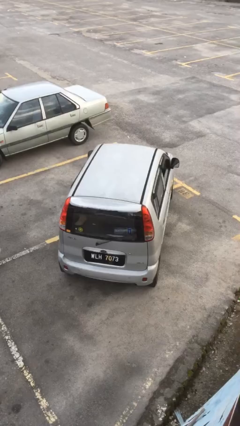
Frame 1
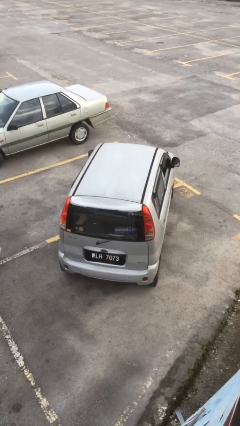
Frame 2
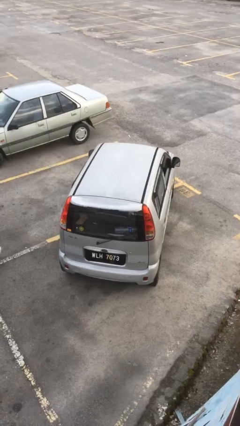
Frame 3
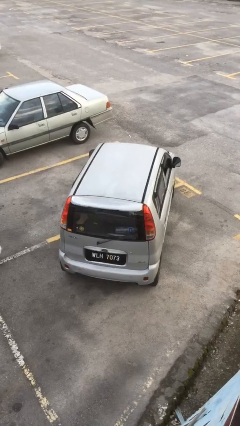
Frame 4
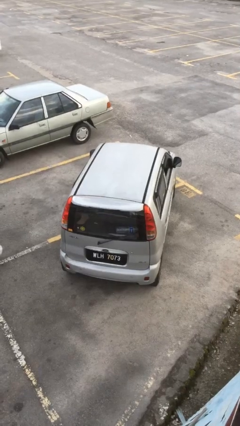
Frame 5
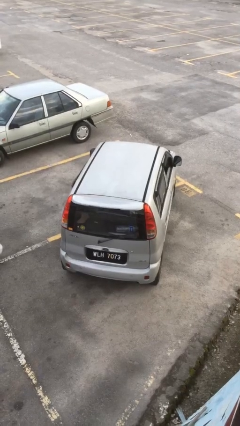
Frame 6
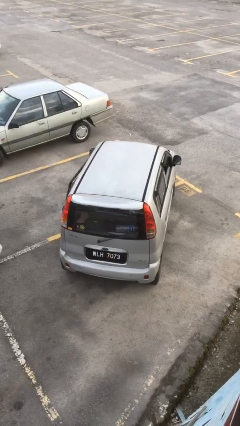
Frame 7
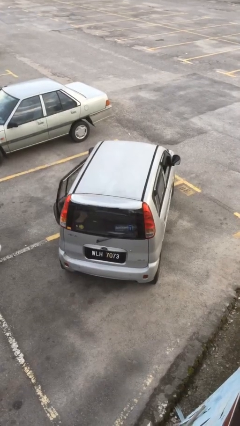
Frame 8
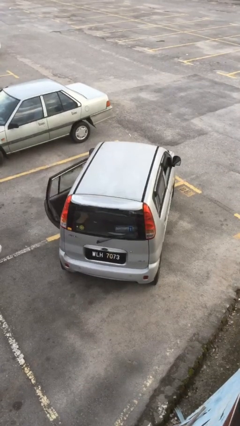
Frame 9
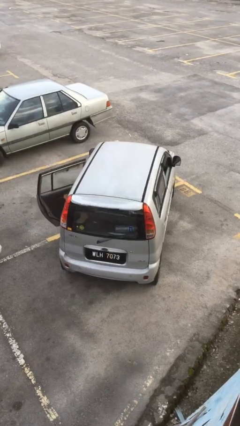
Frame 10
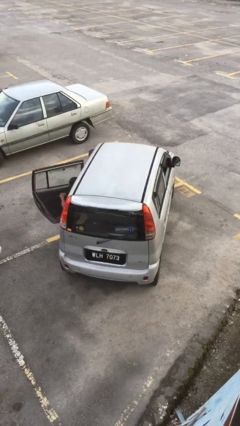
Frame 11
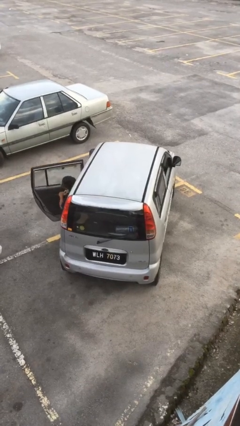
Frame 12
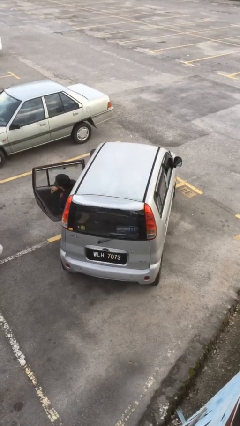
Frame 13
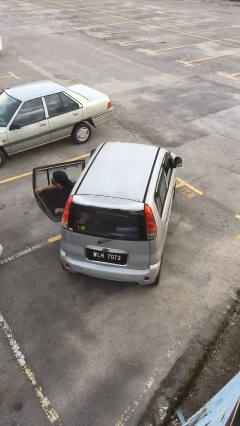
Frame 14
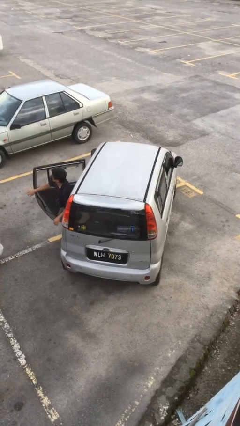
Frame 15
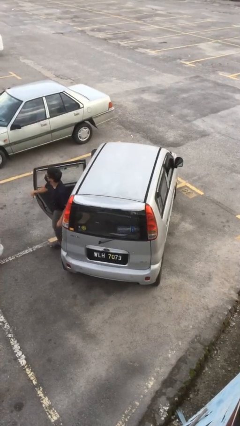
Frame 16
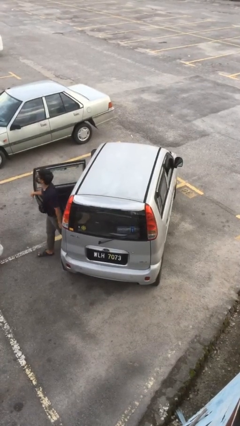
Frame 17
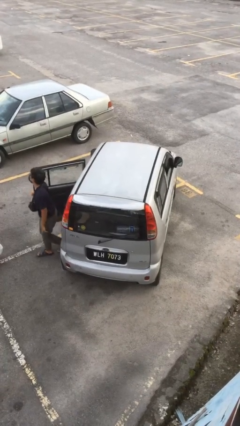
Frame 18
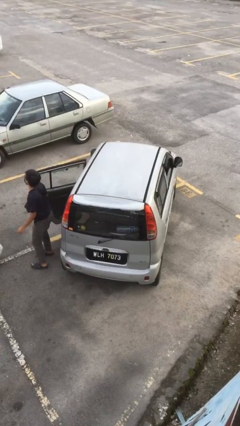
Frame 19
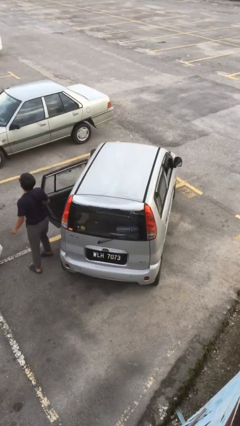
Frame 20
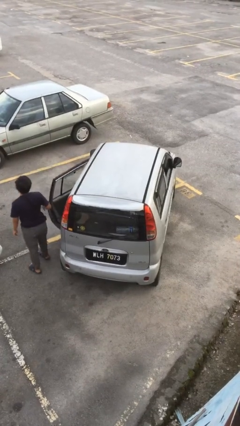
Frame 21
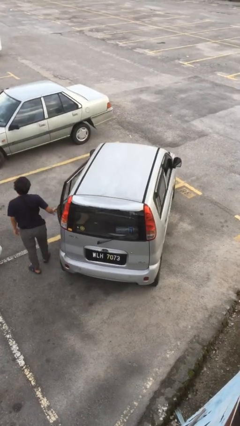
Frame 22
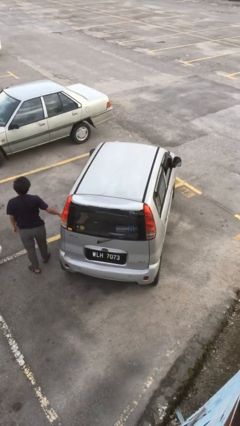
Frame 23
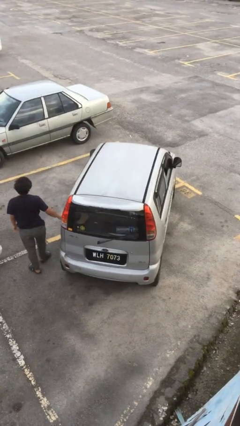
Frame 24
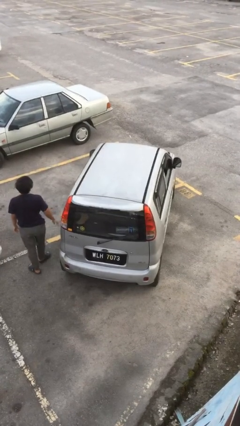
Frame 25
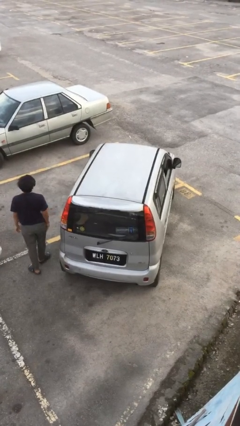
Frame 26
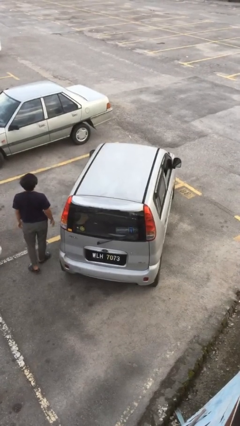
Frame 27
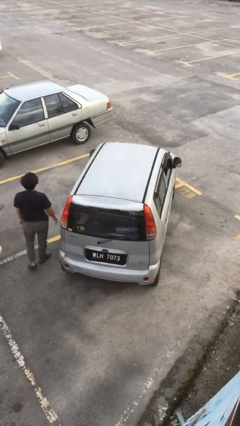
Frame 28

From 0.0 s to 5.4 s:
car drops off person

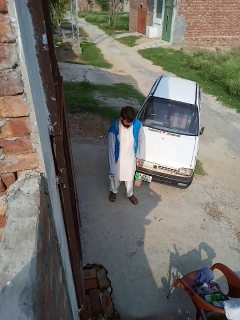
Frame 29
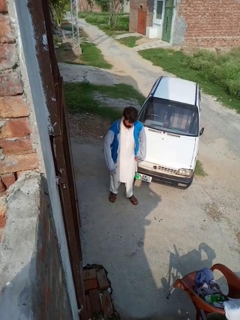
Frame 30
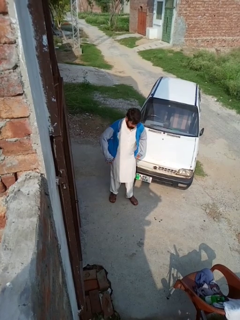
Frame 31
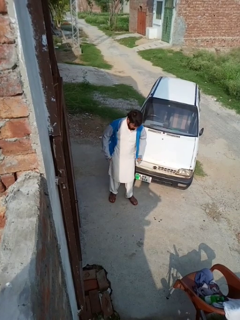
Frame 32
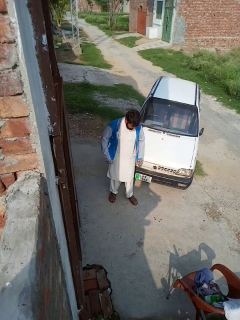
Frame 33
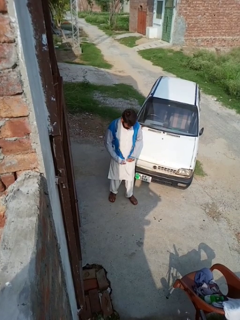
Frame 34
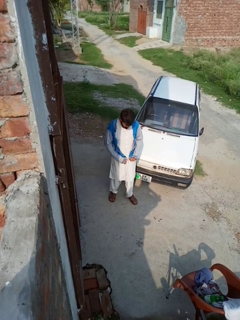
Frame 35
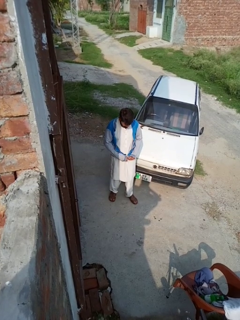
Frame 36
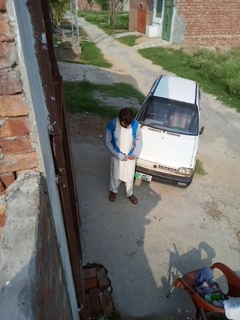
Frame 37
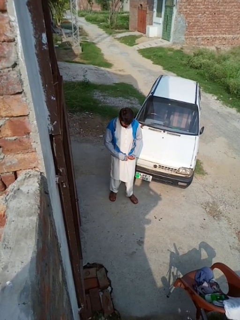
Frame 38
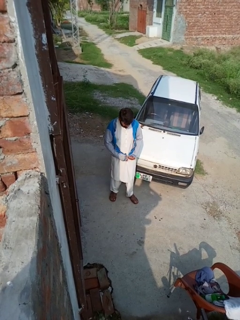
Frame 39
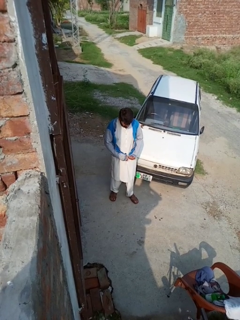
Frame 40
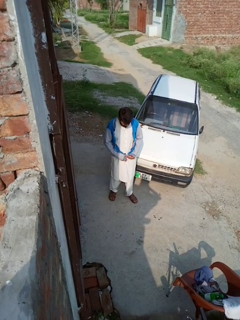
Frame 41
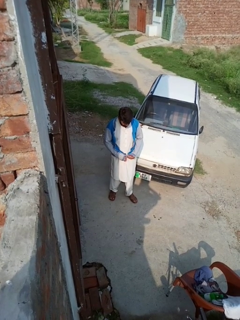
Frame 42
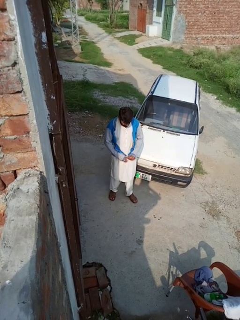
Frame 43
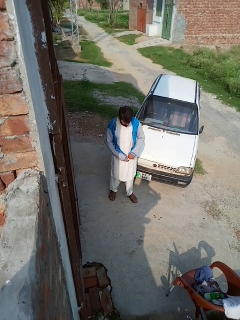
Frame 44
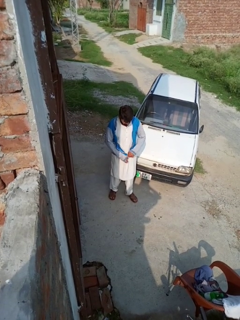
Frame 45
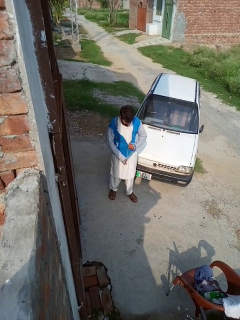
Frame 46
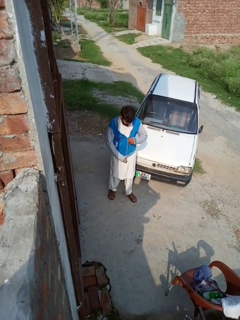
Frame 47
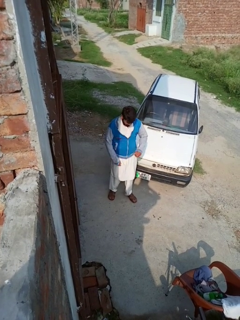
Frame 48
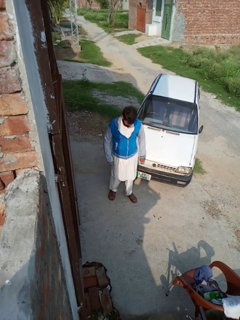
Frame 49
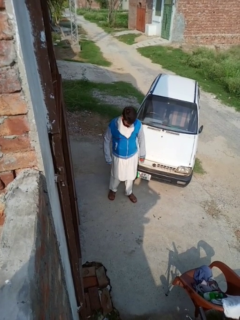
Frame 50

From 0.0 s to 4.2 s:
person zips up jacket

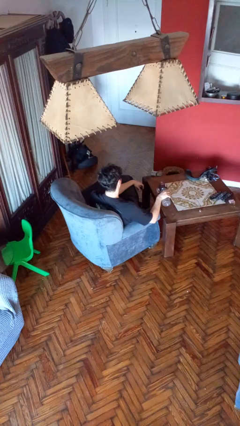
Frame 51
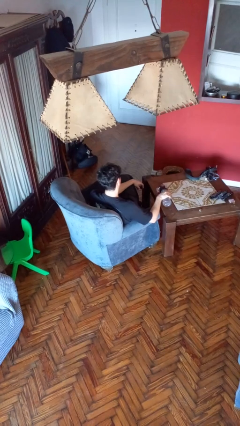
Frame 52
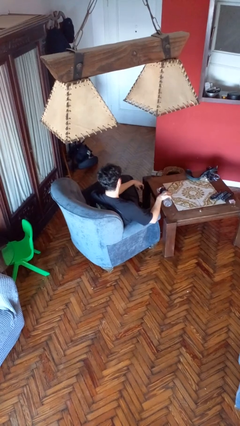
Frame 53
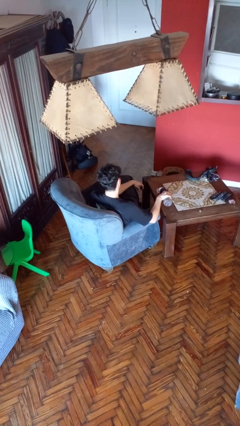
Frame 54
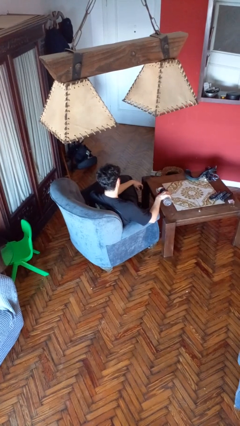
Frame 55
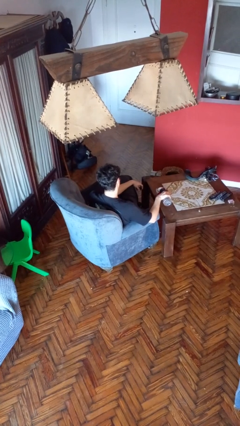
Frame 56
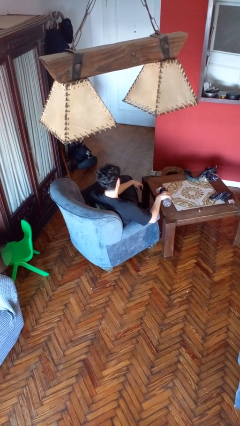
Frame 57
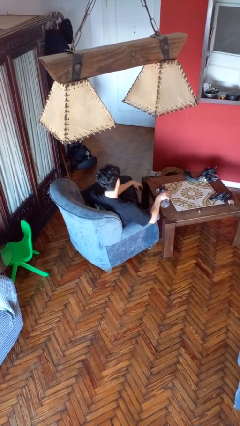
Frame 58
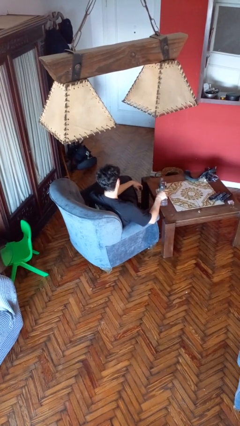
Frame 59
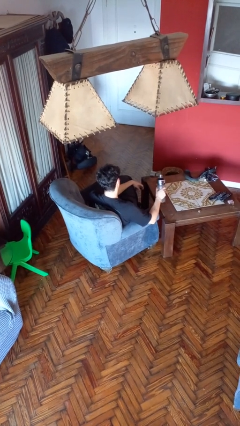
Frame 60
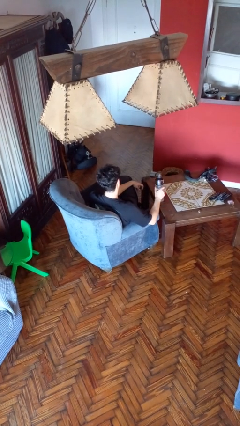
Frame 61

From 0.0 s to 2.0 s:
person pours liquid into cup

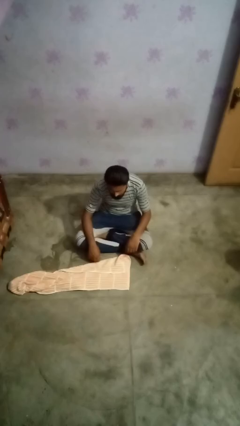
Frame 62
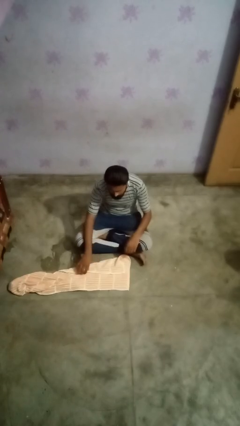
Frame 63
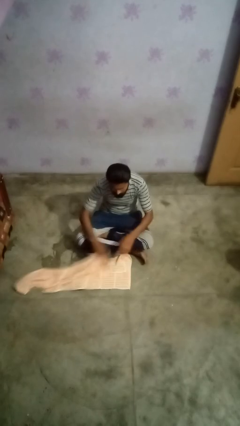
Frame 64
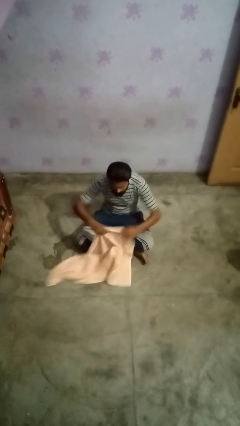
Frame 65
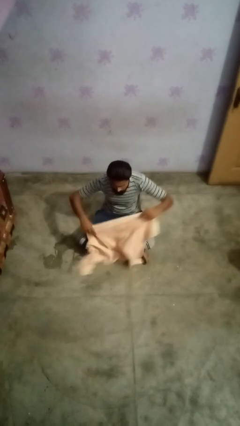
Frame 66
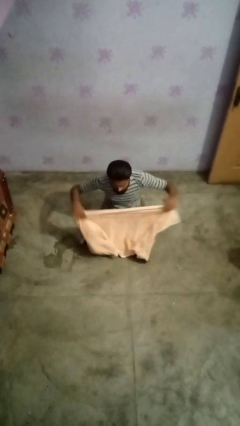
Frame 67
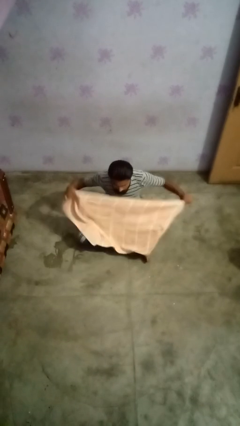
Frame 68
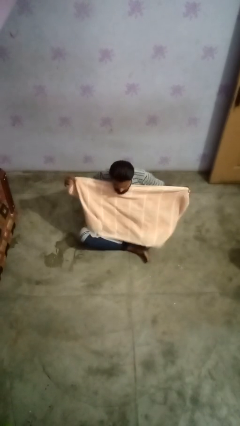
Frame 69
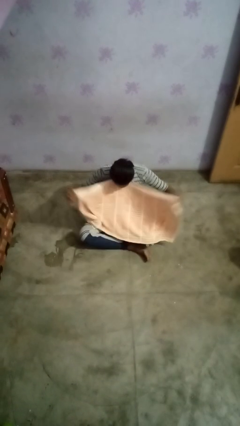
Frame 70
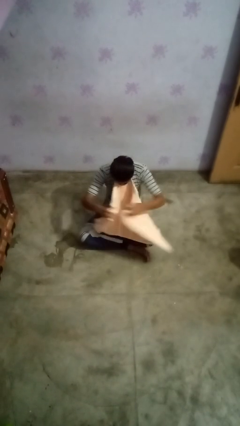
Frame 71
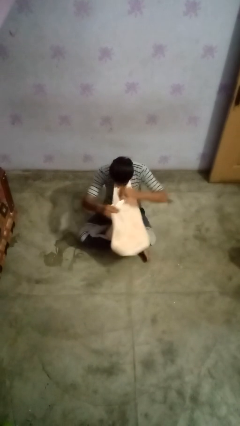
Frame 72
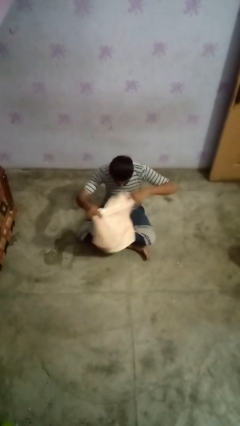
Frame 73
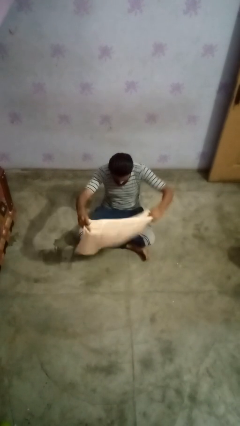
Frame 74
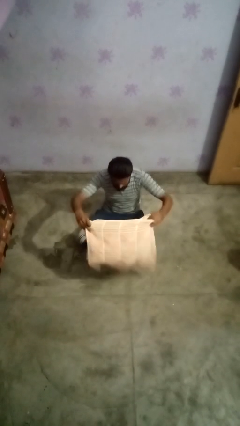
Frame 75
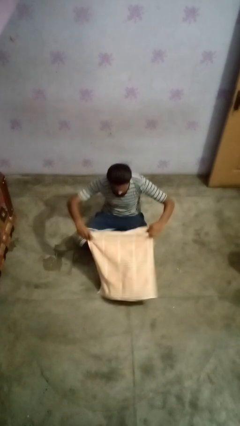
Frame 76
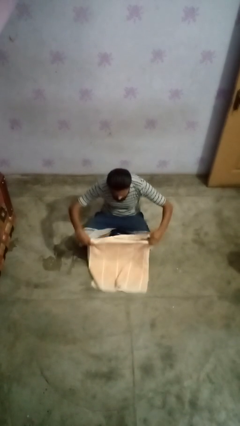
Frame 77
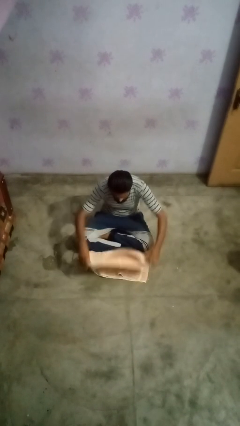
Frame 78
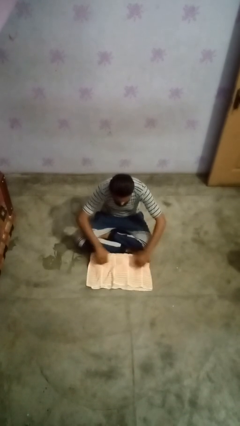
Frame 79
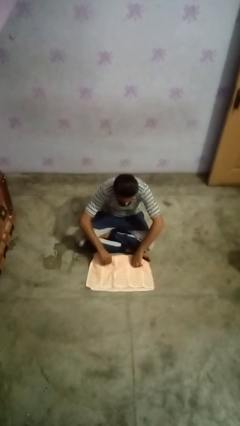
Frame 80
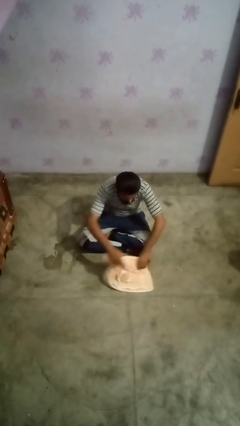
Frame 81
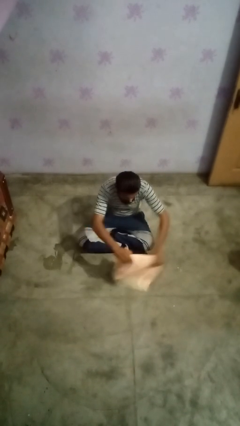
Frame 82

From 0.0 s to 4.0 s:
person folds towel

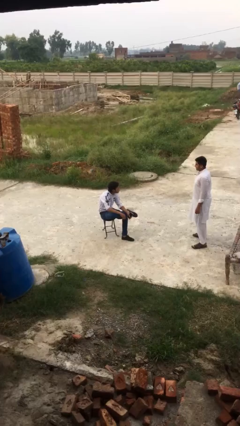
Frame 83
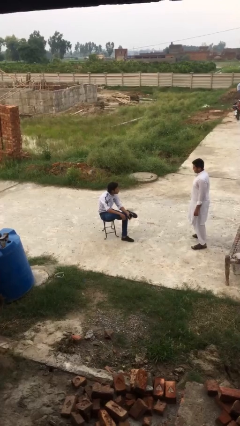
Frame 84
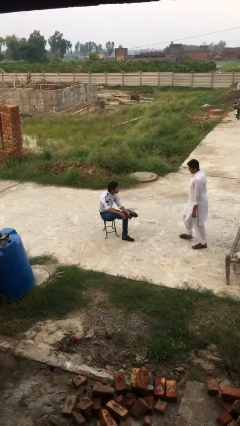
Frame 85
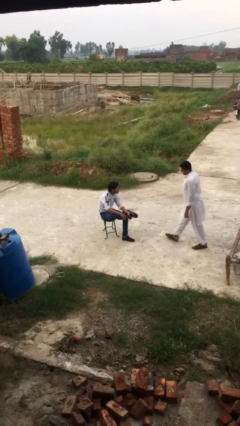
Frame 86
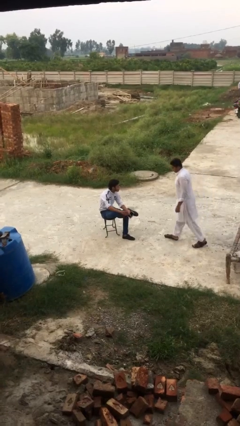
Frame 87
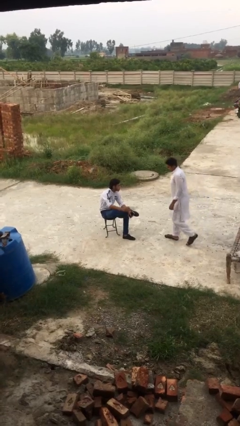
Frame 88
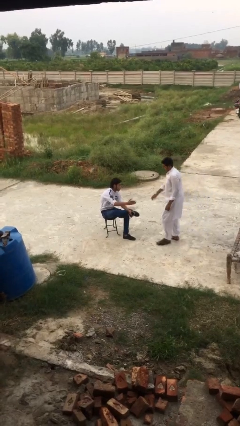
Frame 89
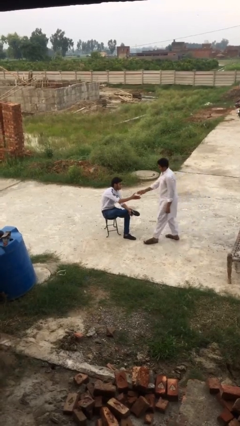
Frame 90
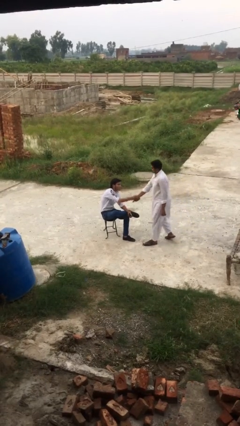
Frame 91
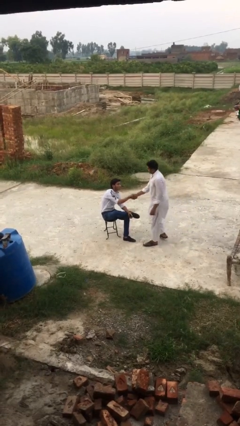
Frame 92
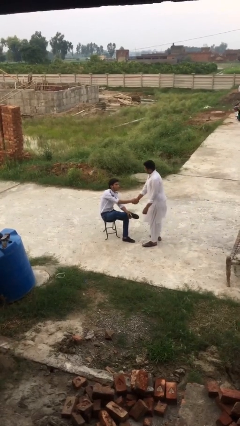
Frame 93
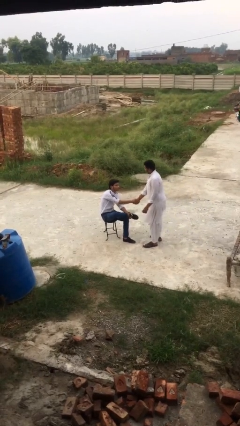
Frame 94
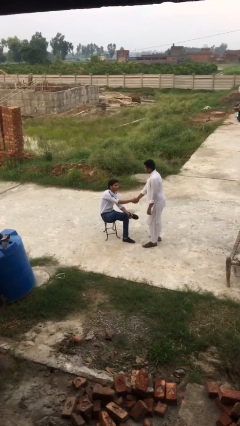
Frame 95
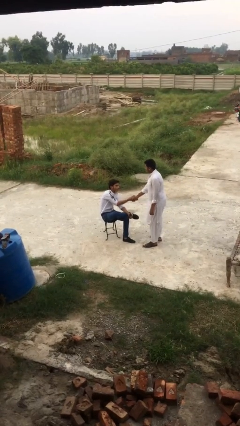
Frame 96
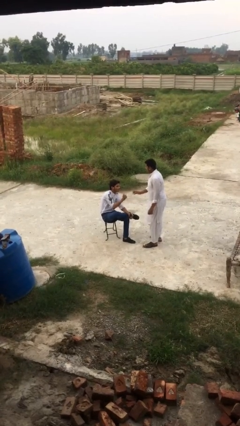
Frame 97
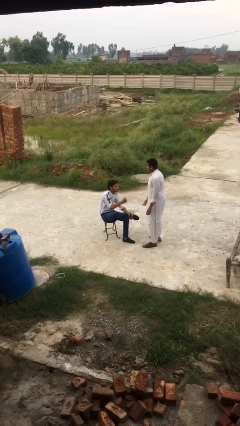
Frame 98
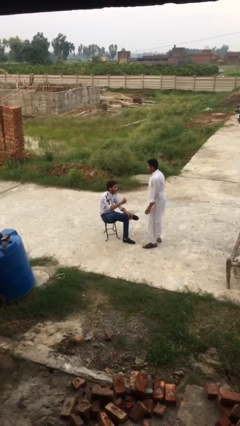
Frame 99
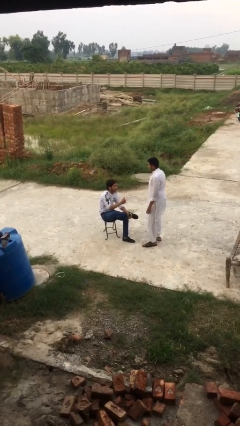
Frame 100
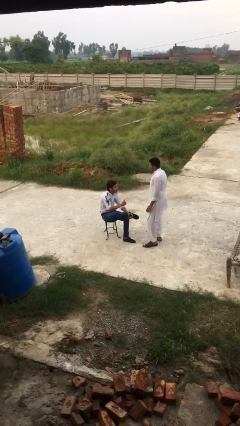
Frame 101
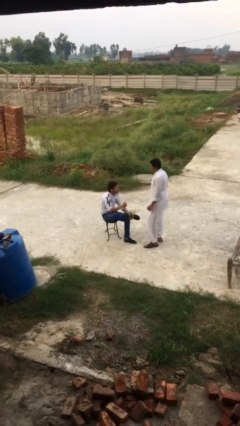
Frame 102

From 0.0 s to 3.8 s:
person shakes hand
